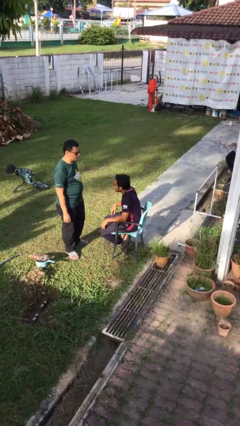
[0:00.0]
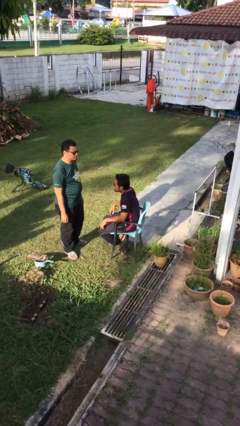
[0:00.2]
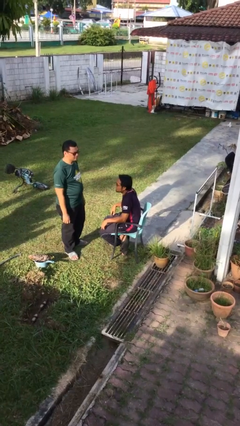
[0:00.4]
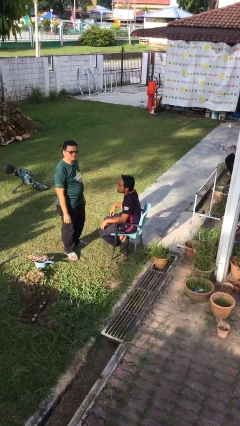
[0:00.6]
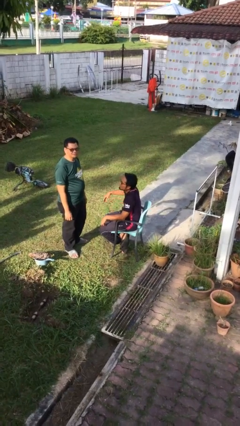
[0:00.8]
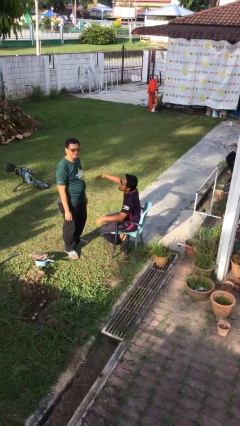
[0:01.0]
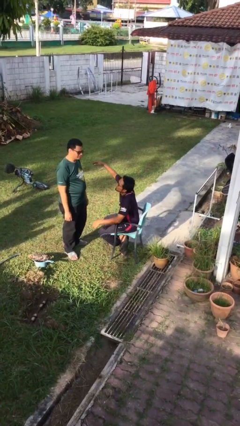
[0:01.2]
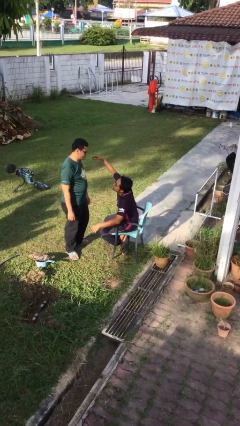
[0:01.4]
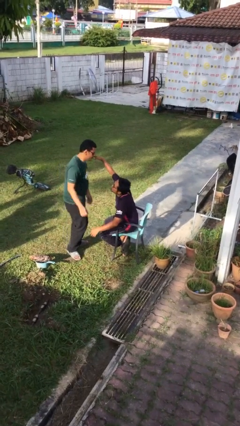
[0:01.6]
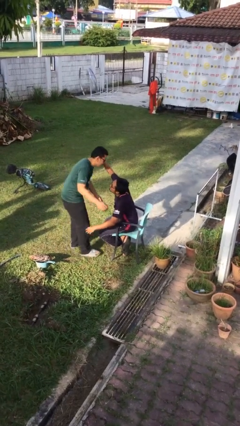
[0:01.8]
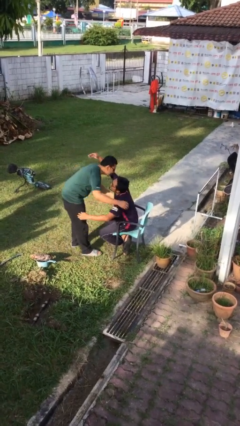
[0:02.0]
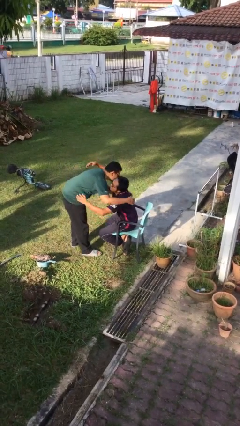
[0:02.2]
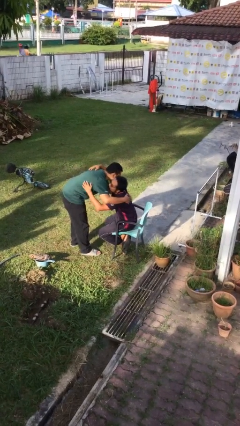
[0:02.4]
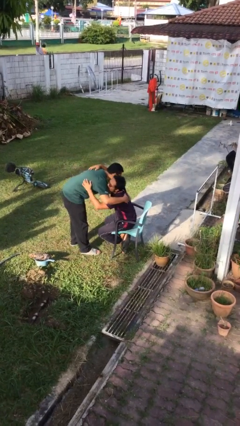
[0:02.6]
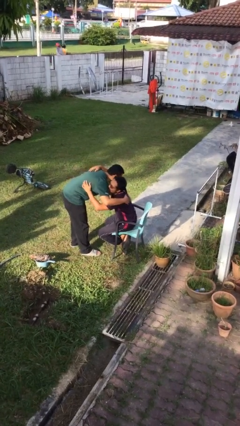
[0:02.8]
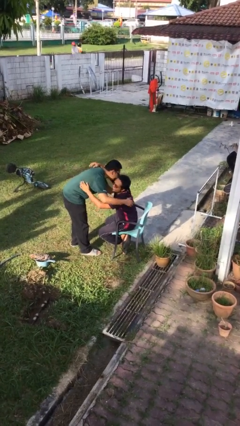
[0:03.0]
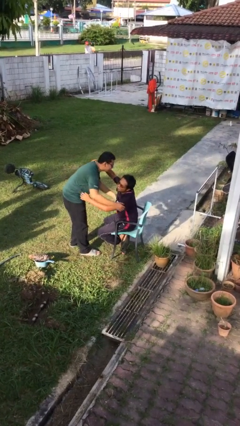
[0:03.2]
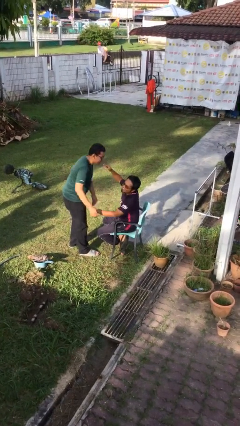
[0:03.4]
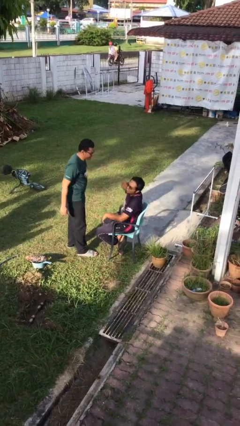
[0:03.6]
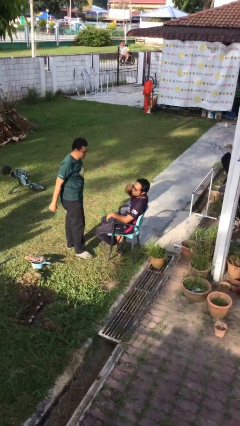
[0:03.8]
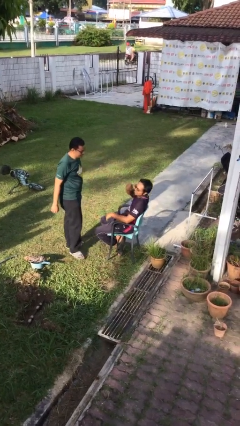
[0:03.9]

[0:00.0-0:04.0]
person embraces person

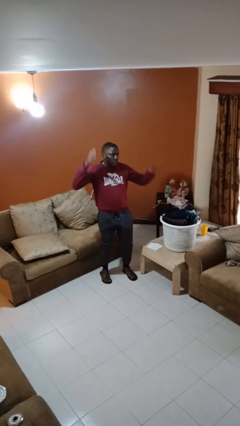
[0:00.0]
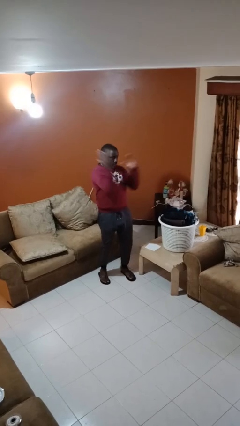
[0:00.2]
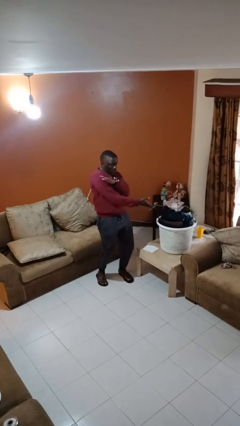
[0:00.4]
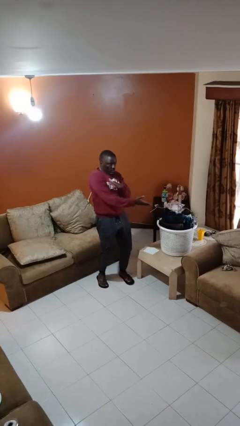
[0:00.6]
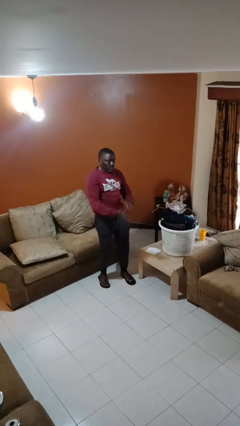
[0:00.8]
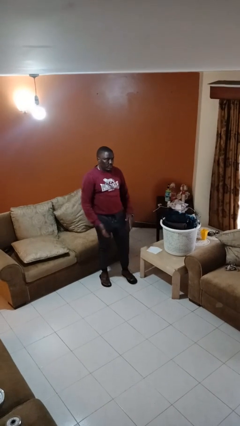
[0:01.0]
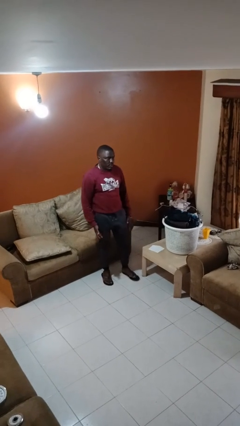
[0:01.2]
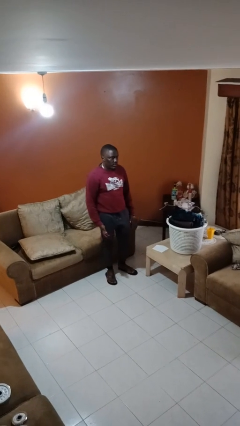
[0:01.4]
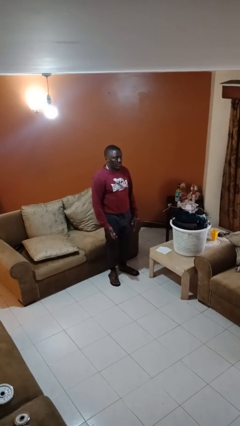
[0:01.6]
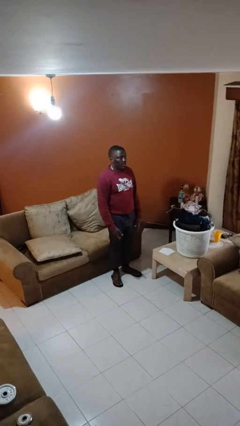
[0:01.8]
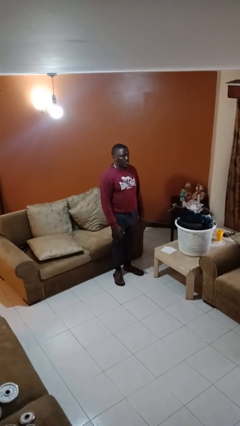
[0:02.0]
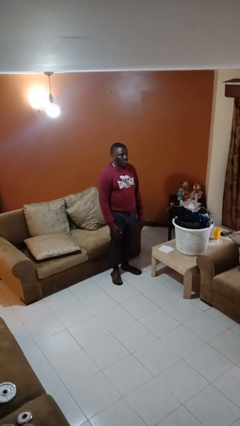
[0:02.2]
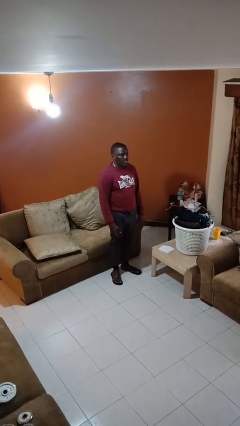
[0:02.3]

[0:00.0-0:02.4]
person karate chop

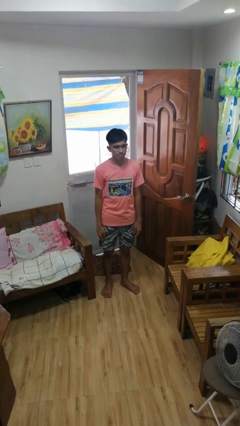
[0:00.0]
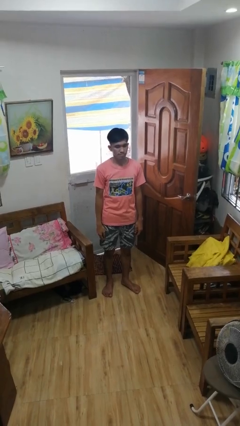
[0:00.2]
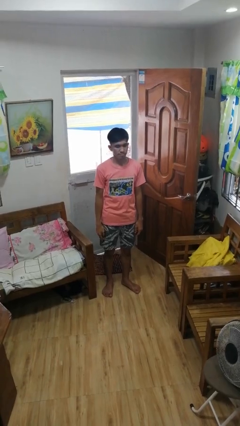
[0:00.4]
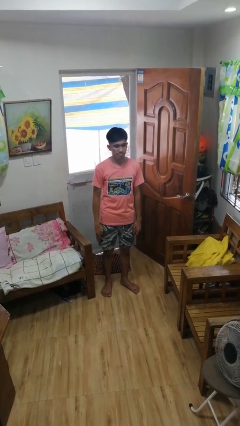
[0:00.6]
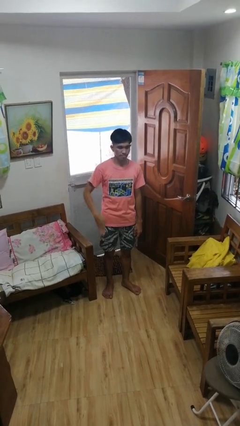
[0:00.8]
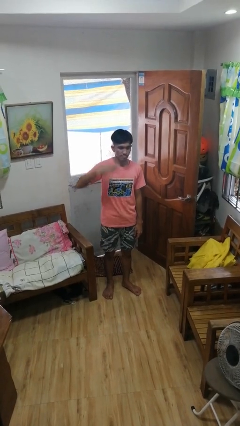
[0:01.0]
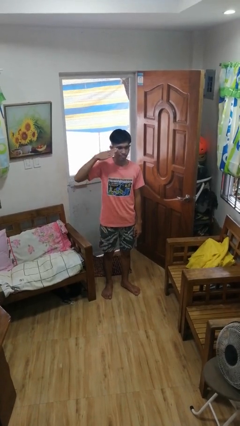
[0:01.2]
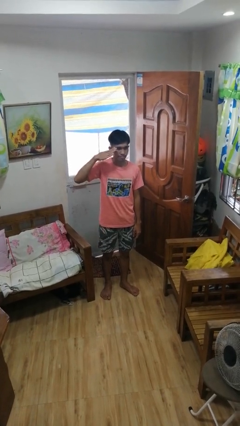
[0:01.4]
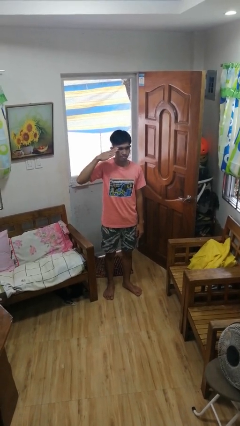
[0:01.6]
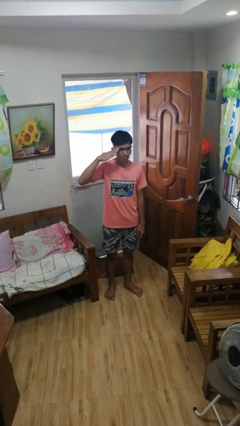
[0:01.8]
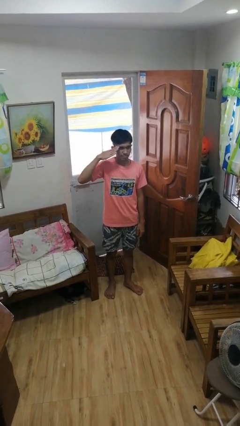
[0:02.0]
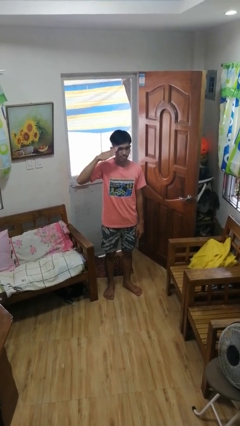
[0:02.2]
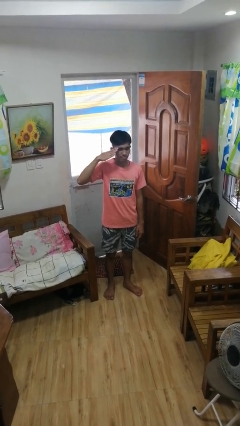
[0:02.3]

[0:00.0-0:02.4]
person salutes

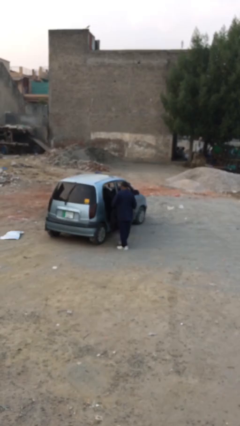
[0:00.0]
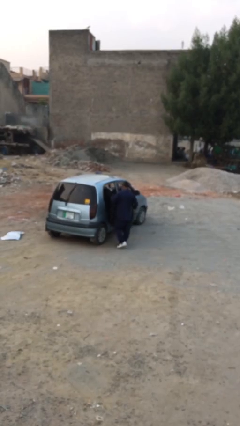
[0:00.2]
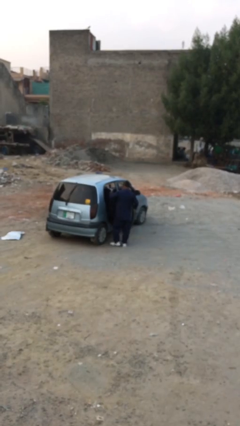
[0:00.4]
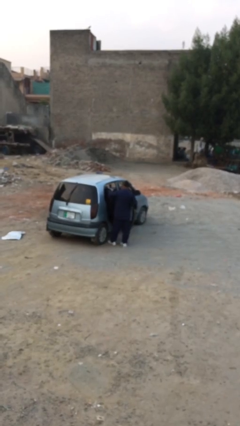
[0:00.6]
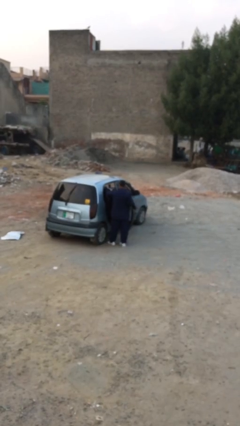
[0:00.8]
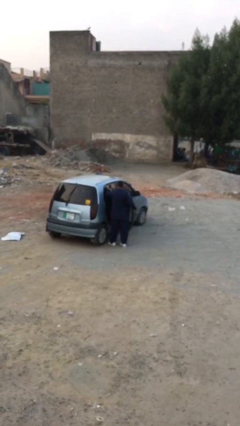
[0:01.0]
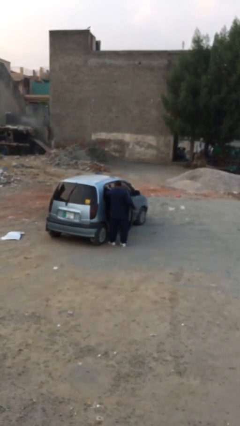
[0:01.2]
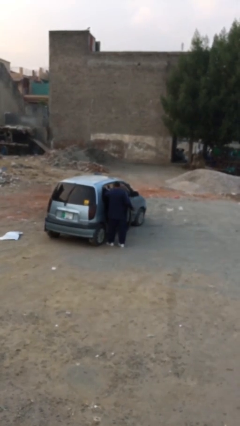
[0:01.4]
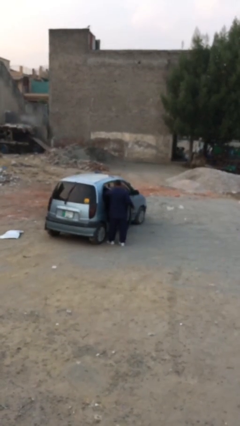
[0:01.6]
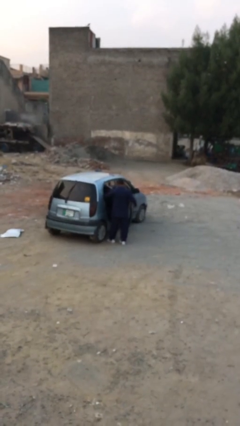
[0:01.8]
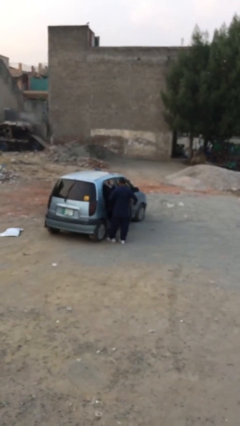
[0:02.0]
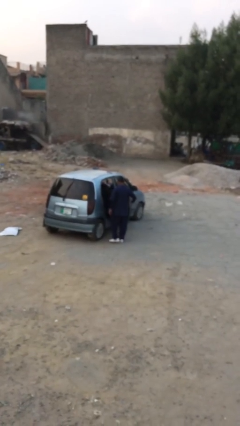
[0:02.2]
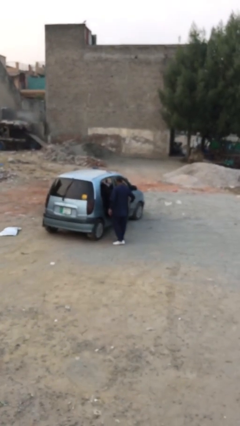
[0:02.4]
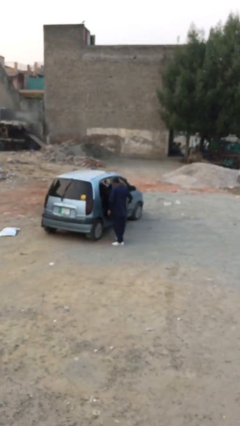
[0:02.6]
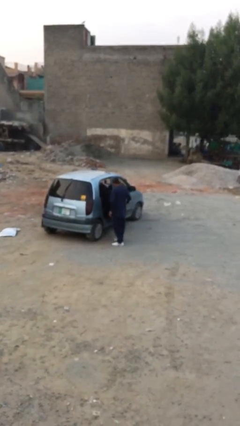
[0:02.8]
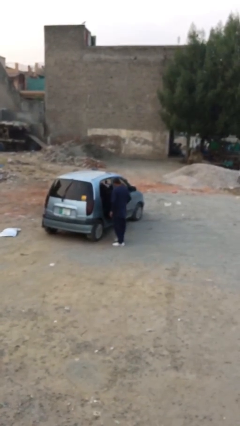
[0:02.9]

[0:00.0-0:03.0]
person loads car

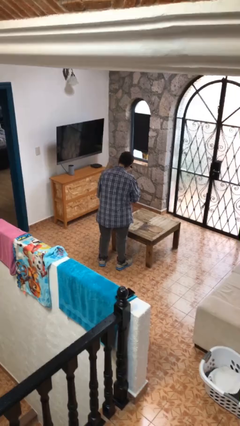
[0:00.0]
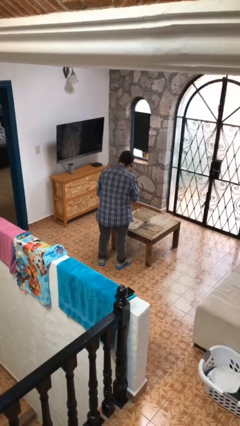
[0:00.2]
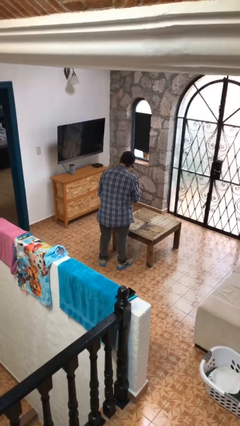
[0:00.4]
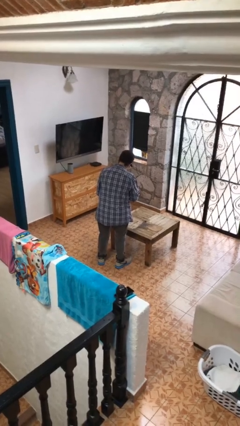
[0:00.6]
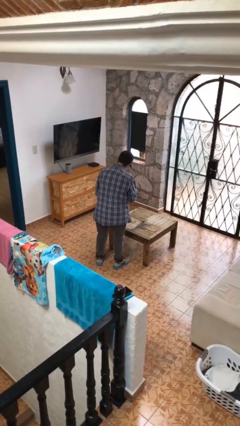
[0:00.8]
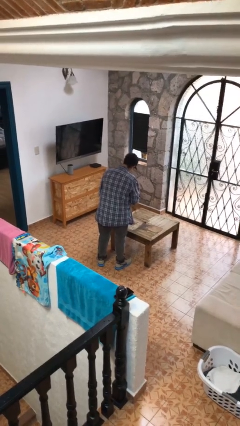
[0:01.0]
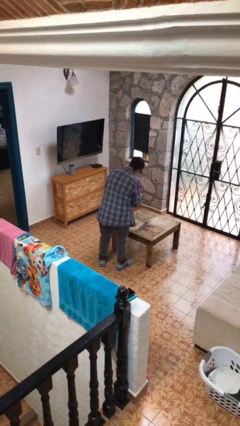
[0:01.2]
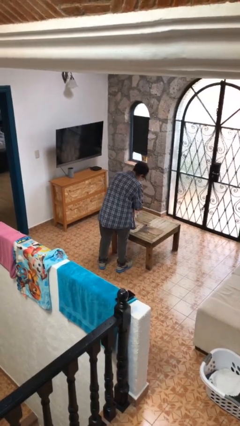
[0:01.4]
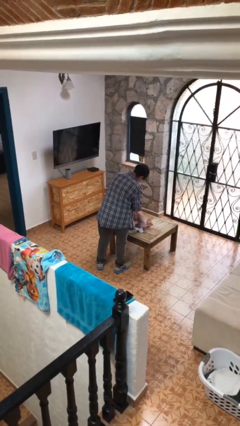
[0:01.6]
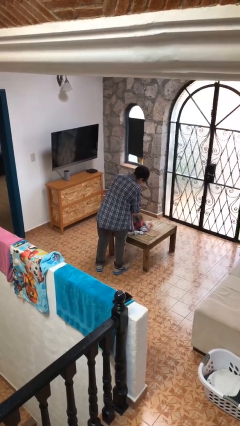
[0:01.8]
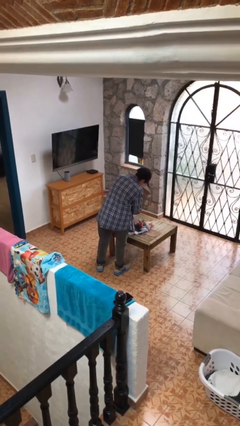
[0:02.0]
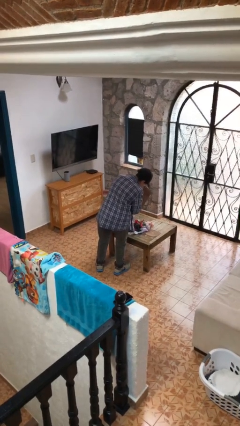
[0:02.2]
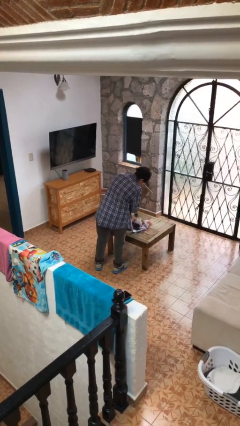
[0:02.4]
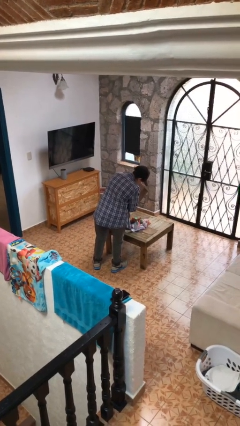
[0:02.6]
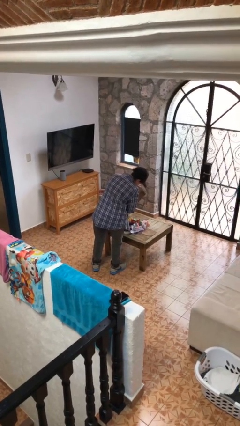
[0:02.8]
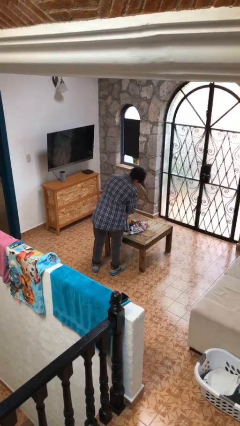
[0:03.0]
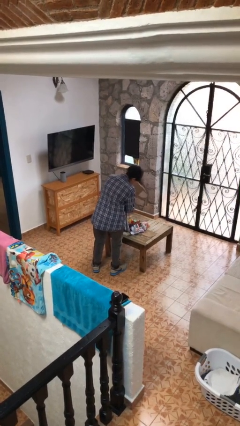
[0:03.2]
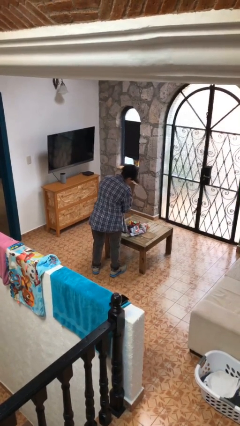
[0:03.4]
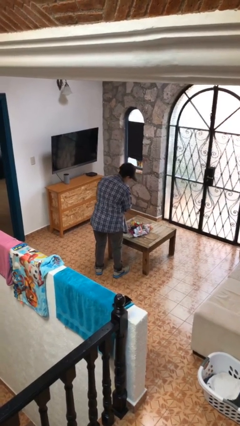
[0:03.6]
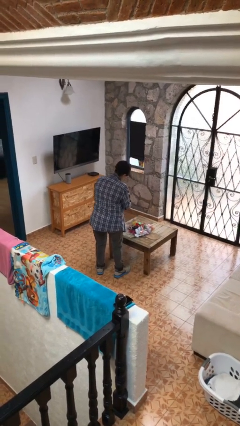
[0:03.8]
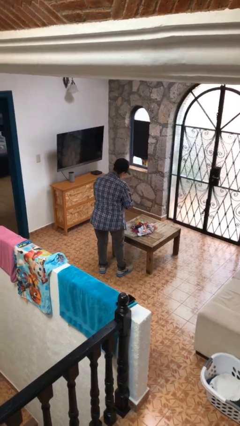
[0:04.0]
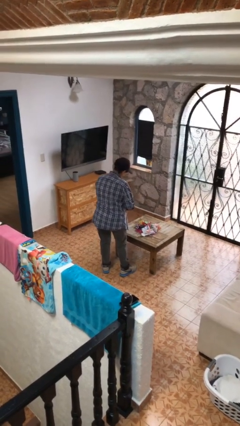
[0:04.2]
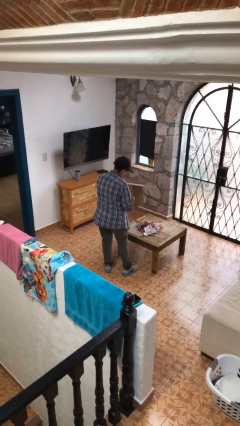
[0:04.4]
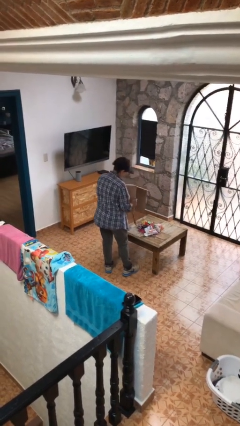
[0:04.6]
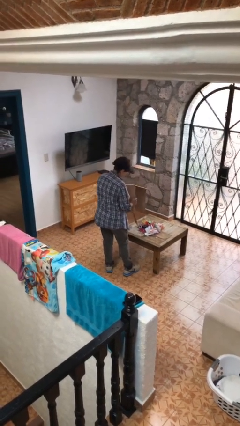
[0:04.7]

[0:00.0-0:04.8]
person unloads box onto table

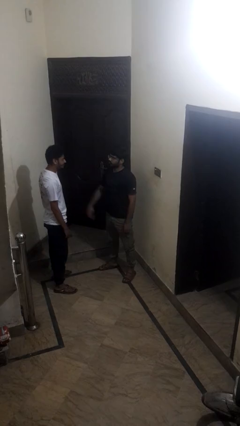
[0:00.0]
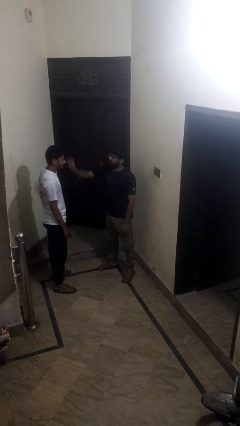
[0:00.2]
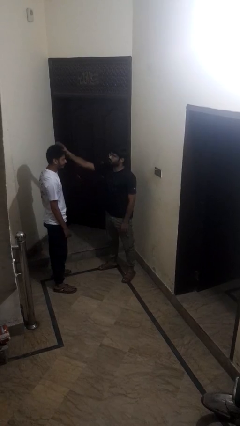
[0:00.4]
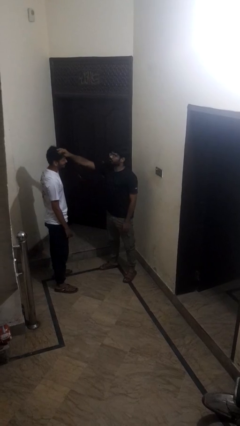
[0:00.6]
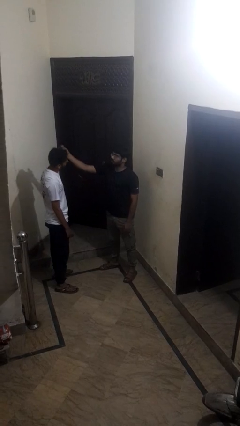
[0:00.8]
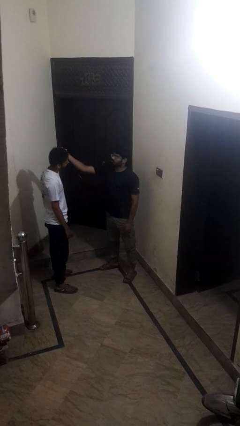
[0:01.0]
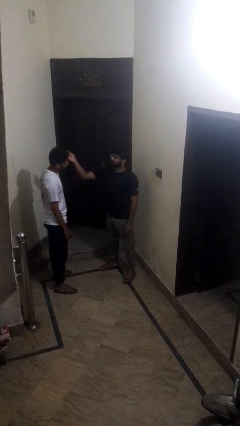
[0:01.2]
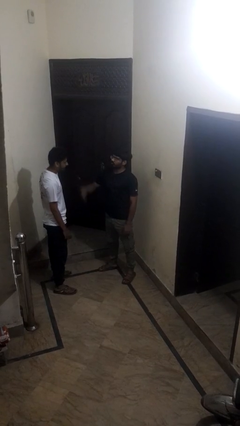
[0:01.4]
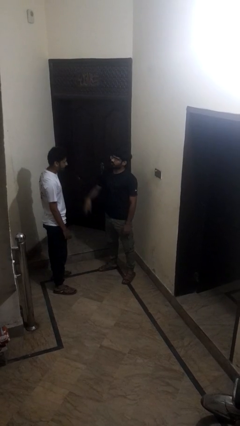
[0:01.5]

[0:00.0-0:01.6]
person grabs person by hair
